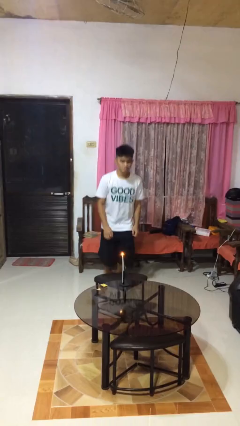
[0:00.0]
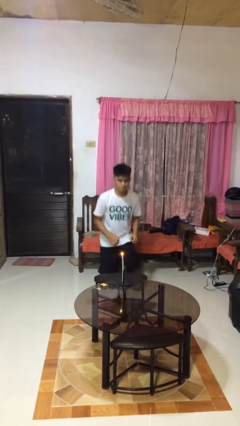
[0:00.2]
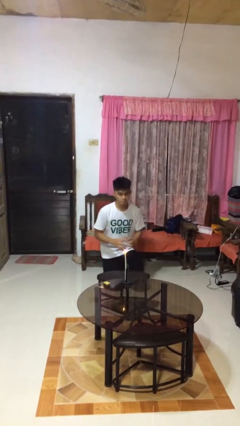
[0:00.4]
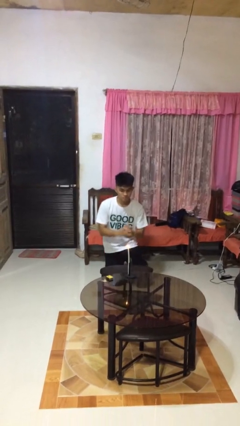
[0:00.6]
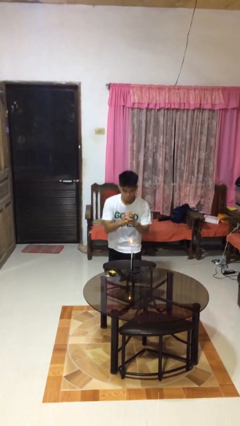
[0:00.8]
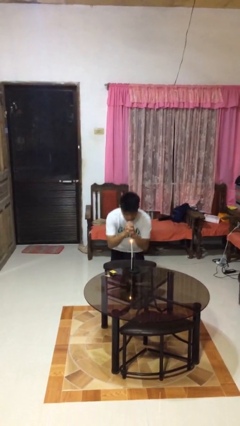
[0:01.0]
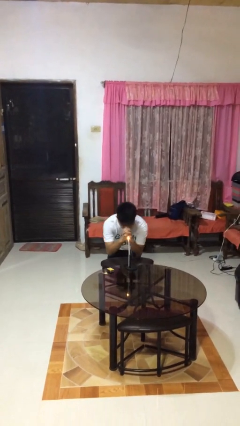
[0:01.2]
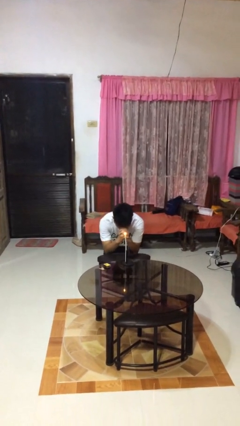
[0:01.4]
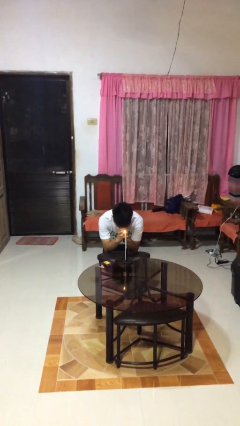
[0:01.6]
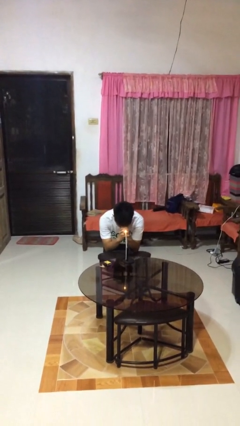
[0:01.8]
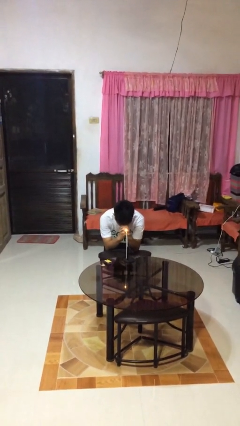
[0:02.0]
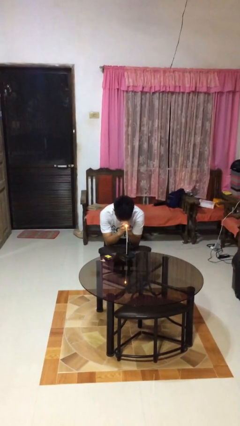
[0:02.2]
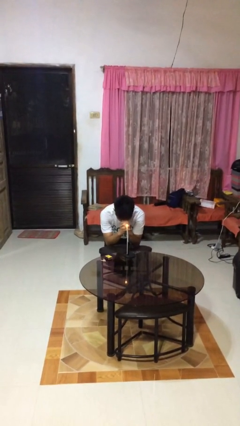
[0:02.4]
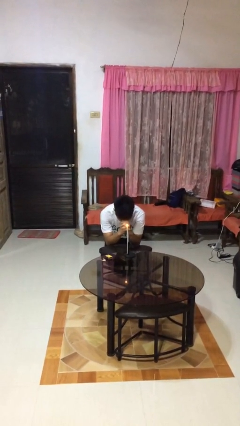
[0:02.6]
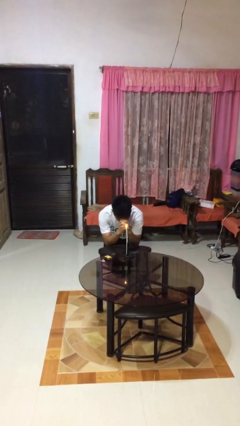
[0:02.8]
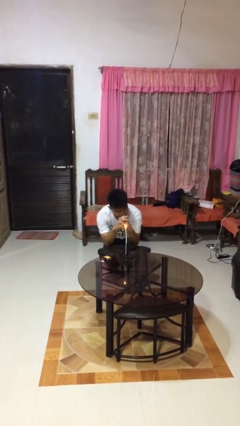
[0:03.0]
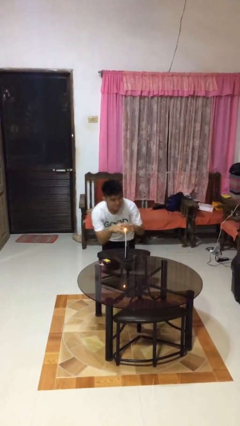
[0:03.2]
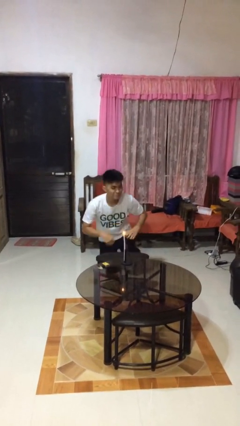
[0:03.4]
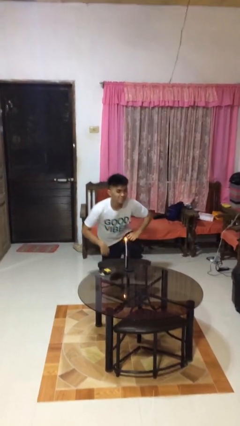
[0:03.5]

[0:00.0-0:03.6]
person prays

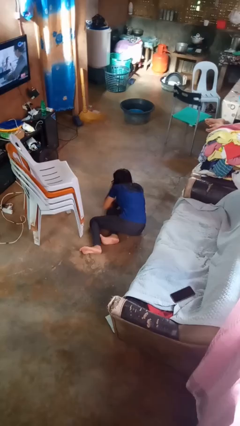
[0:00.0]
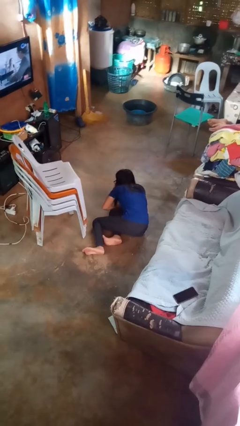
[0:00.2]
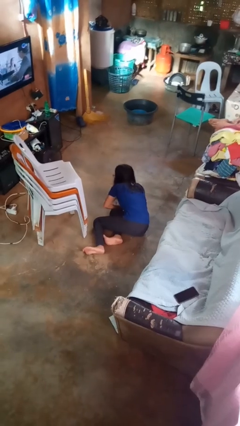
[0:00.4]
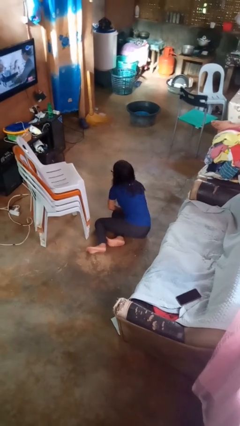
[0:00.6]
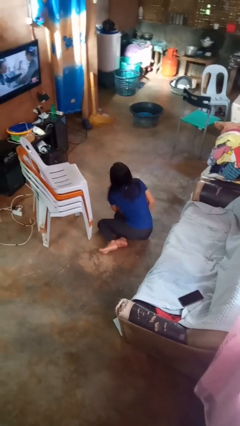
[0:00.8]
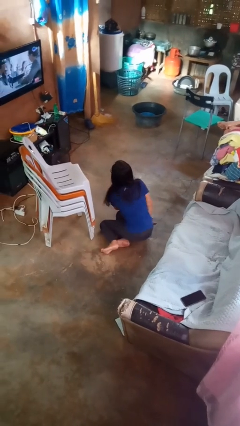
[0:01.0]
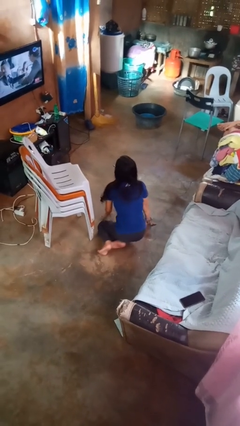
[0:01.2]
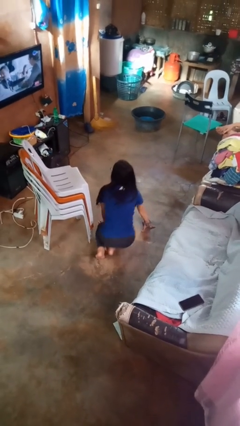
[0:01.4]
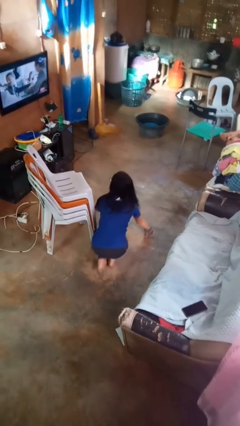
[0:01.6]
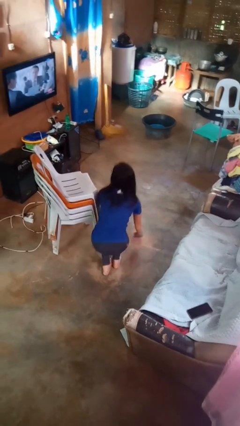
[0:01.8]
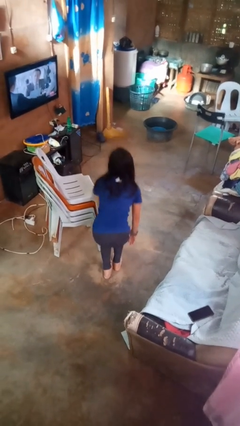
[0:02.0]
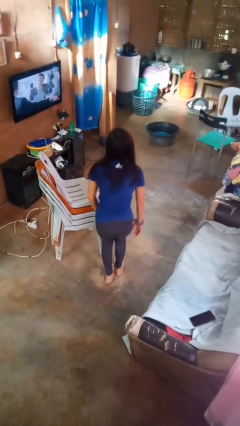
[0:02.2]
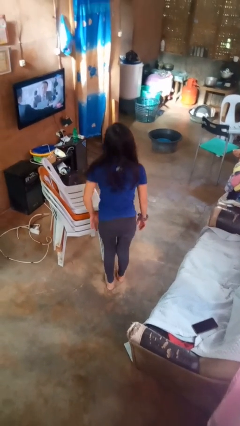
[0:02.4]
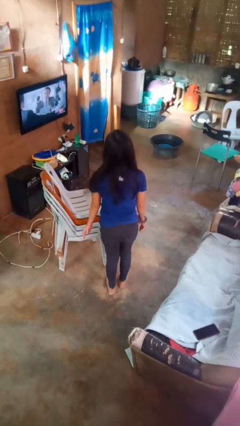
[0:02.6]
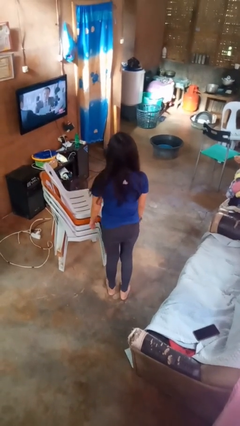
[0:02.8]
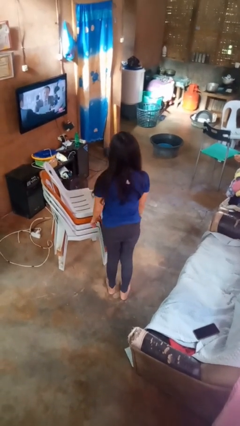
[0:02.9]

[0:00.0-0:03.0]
person stands up from floor

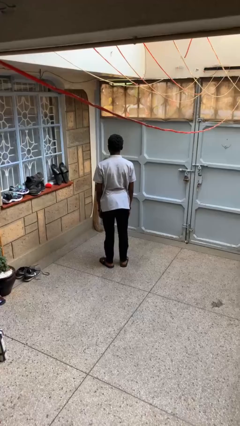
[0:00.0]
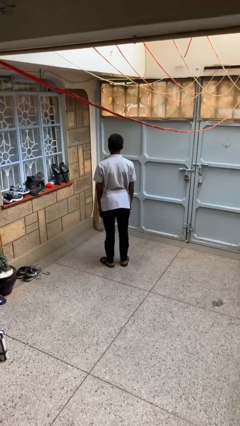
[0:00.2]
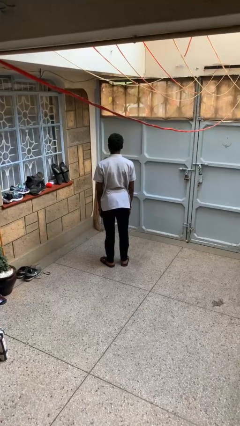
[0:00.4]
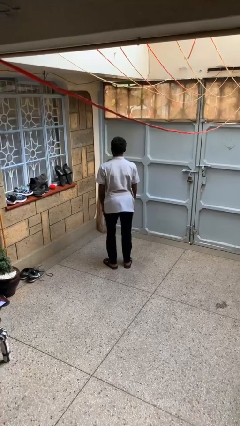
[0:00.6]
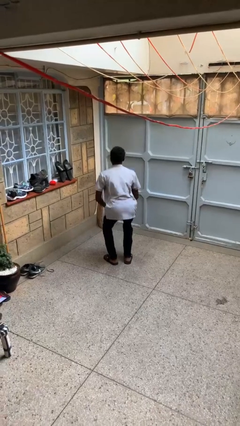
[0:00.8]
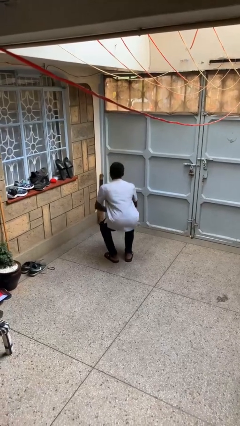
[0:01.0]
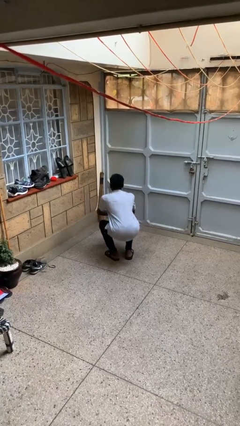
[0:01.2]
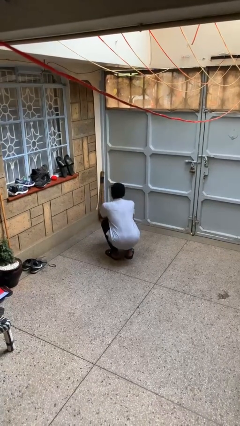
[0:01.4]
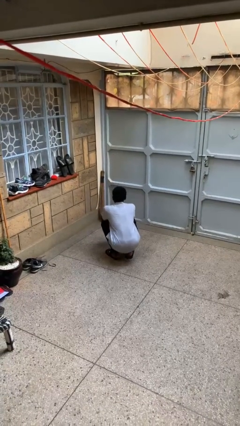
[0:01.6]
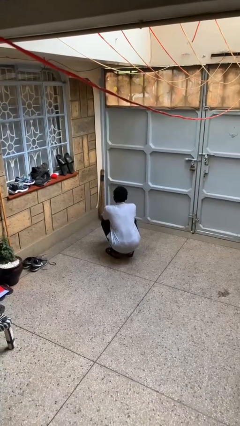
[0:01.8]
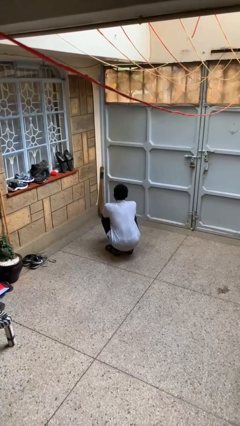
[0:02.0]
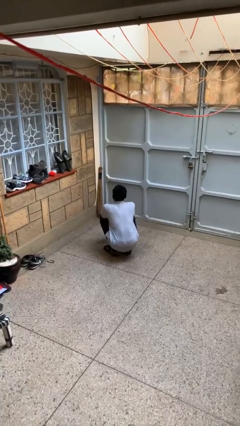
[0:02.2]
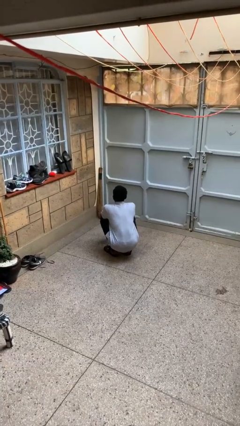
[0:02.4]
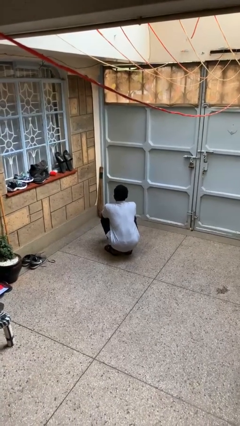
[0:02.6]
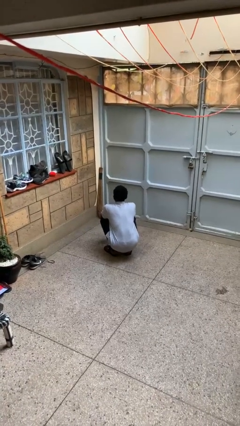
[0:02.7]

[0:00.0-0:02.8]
person squats

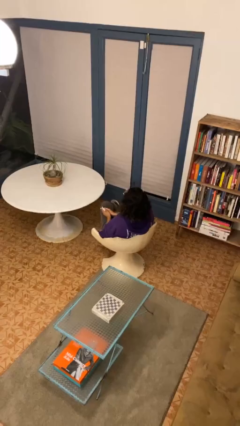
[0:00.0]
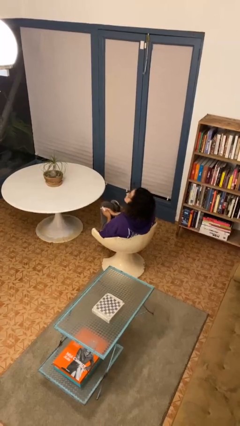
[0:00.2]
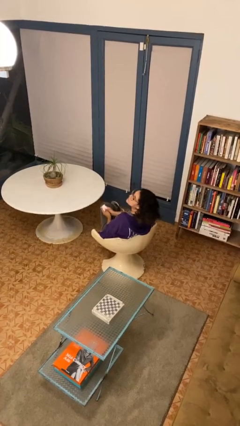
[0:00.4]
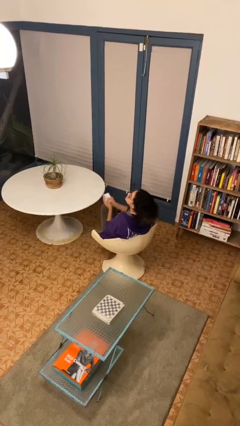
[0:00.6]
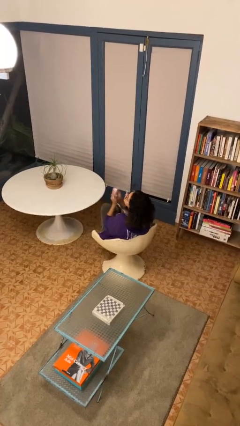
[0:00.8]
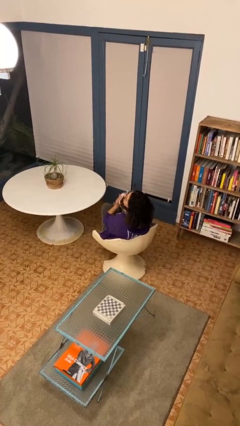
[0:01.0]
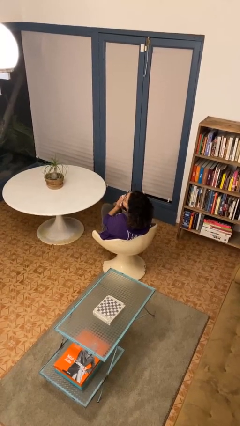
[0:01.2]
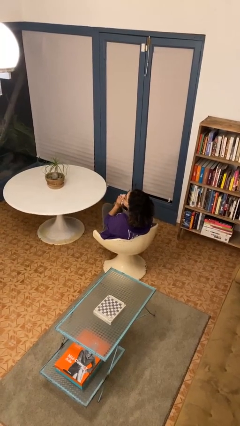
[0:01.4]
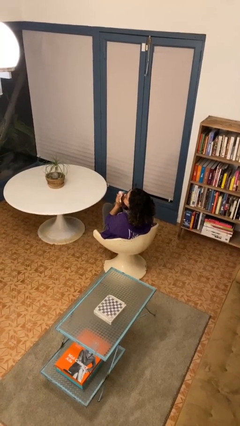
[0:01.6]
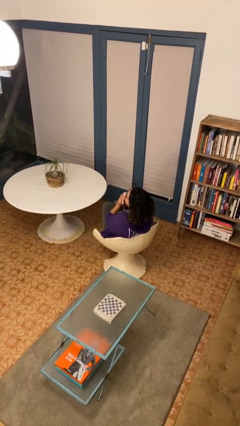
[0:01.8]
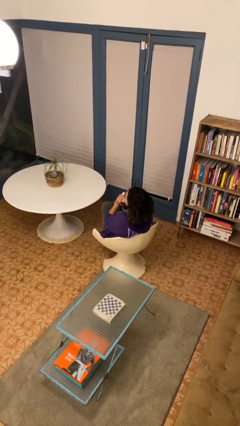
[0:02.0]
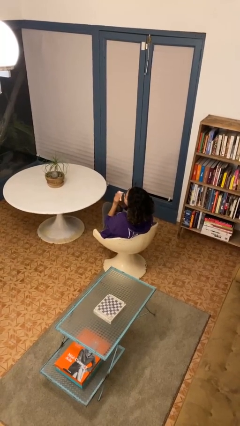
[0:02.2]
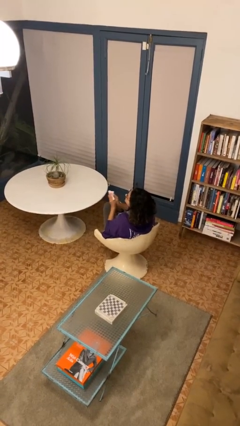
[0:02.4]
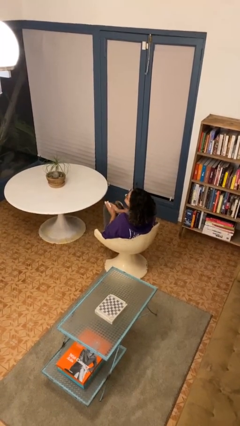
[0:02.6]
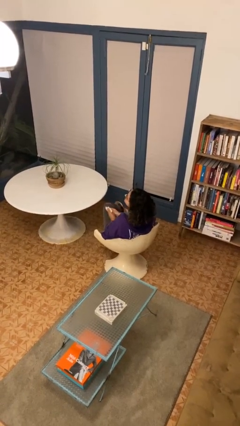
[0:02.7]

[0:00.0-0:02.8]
person blows nose

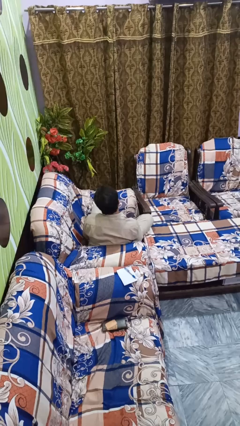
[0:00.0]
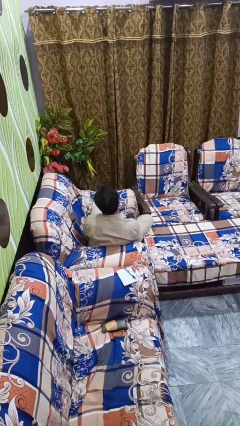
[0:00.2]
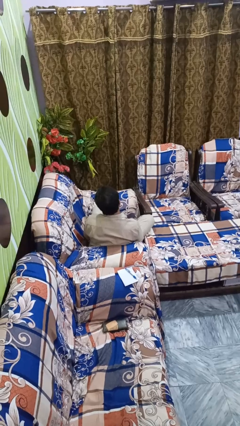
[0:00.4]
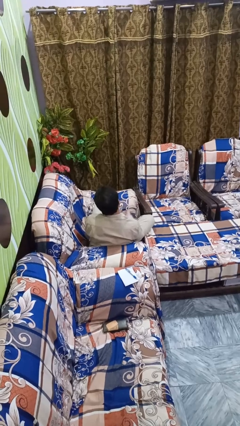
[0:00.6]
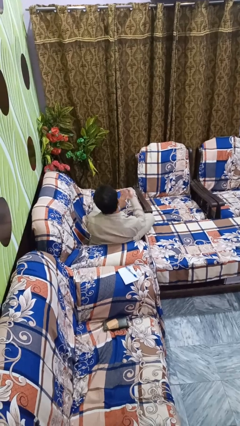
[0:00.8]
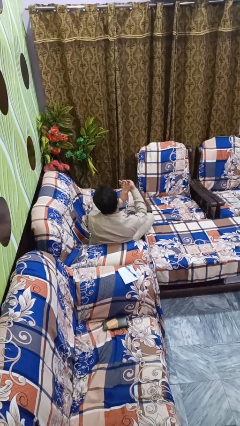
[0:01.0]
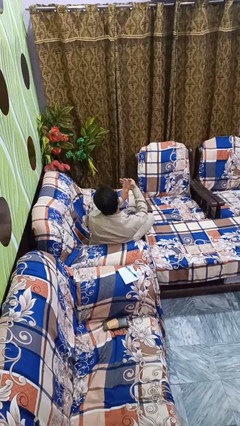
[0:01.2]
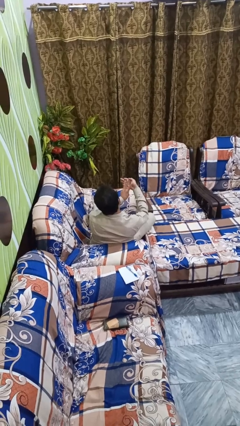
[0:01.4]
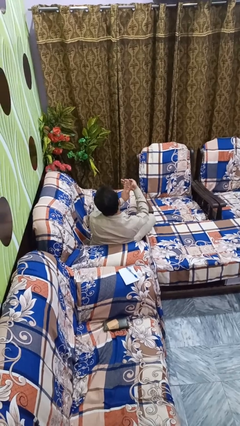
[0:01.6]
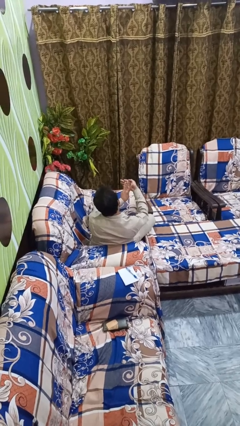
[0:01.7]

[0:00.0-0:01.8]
person gestures number three

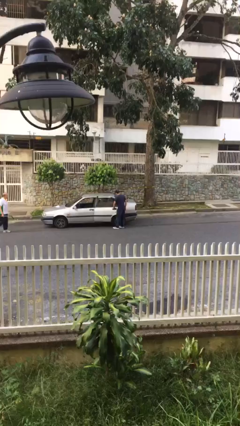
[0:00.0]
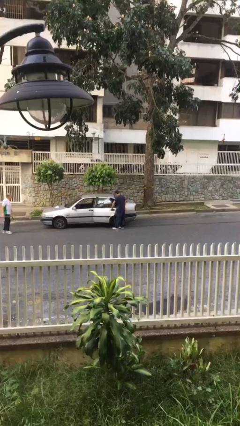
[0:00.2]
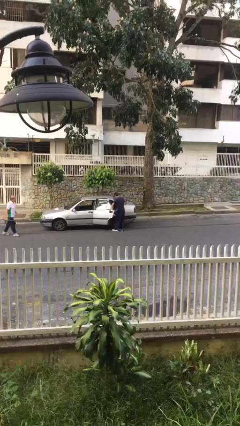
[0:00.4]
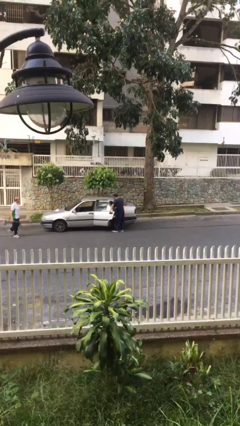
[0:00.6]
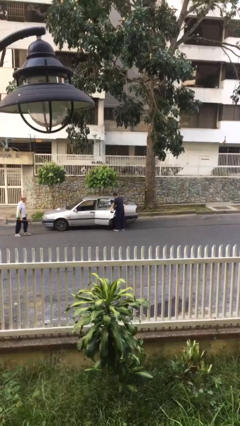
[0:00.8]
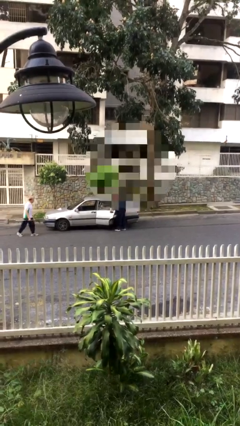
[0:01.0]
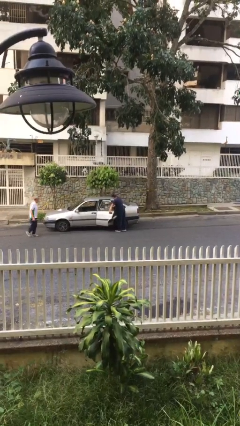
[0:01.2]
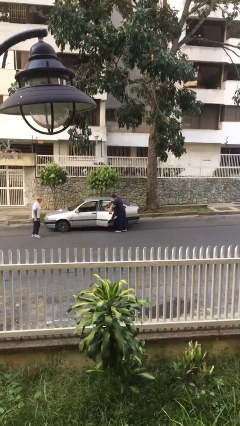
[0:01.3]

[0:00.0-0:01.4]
person opens car door

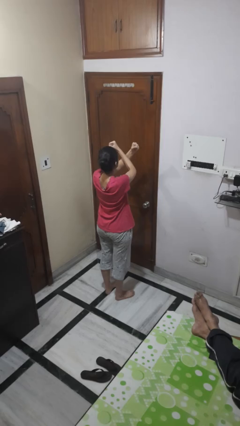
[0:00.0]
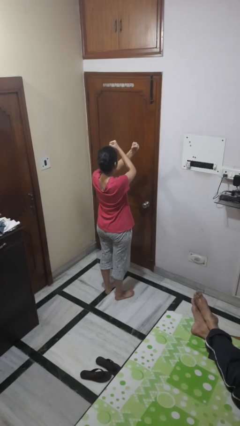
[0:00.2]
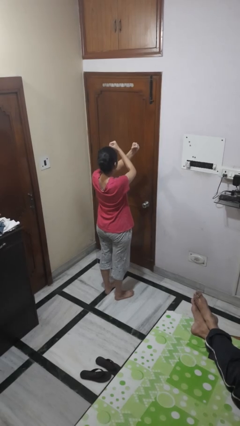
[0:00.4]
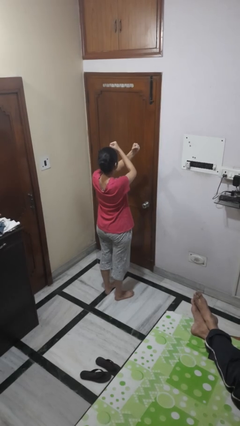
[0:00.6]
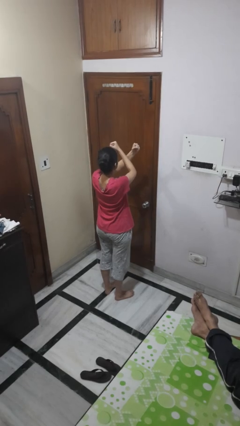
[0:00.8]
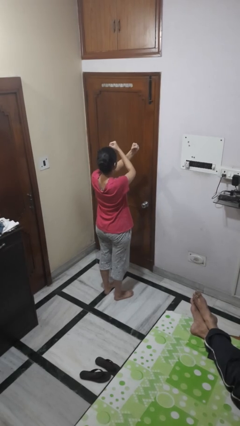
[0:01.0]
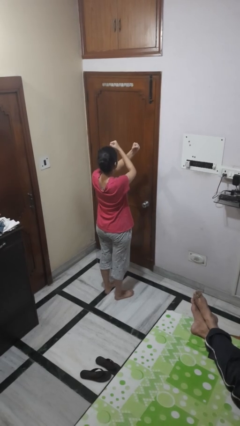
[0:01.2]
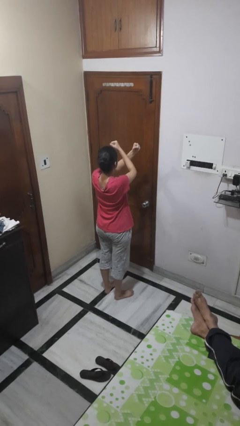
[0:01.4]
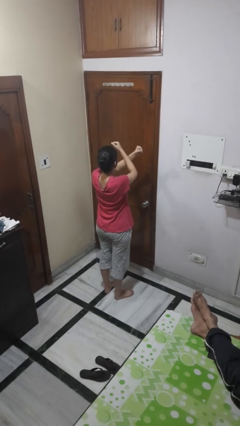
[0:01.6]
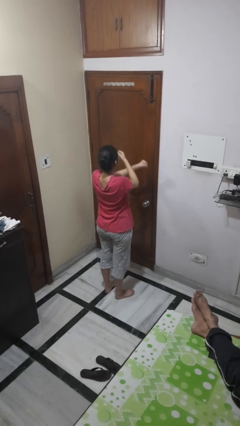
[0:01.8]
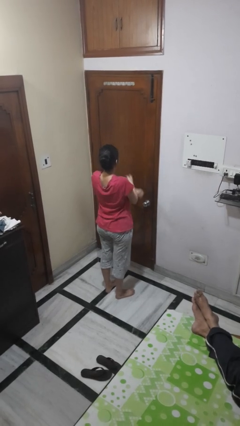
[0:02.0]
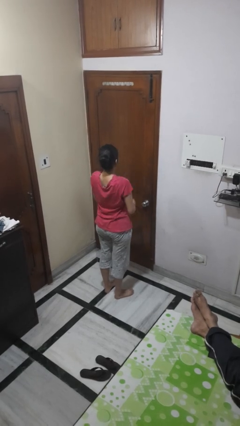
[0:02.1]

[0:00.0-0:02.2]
person gestures arms x
